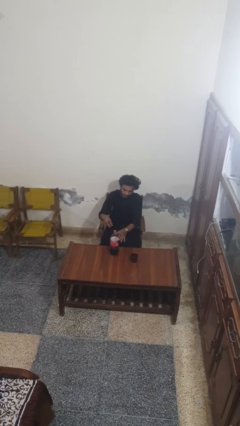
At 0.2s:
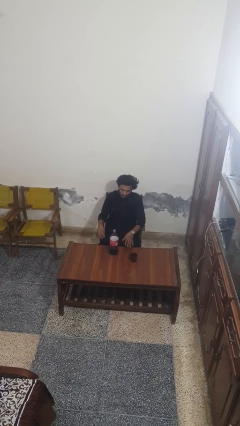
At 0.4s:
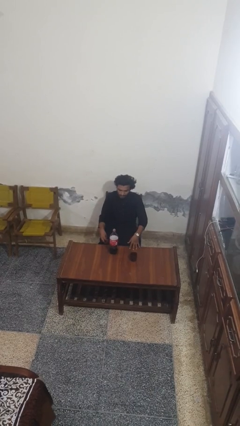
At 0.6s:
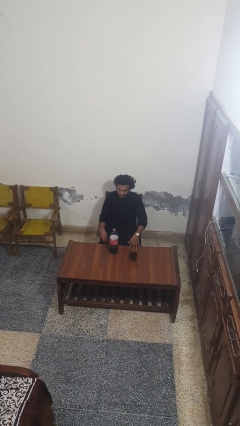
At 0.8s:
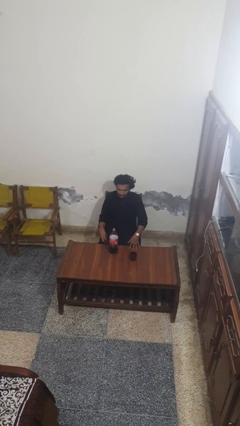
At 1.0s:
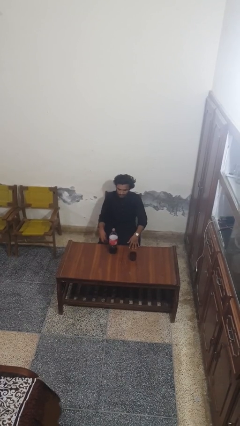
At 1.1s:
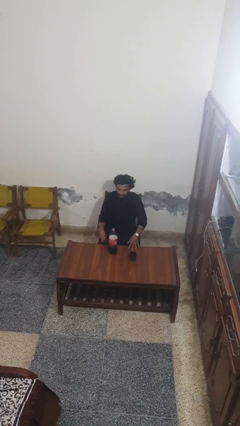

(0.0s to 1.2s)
person unscrews lid from bottle

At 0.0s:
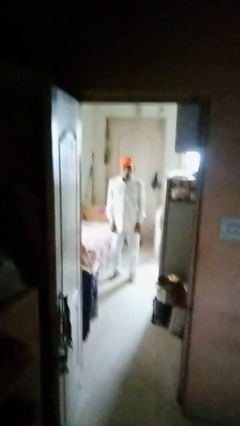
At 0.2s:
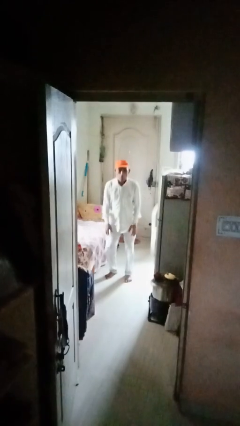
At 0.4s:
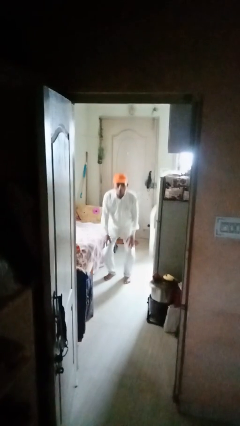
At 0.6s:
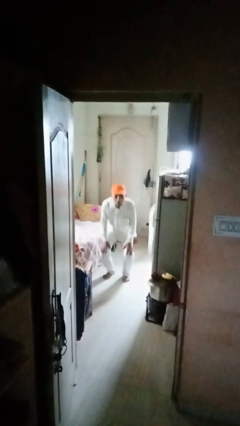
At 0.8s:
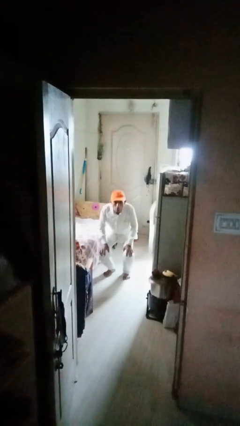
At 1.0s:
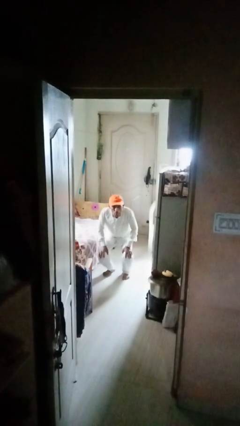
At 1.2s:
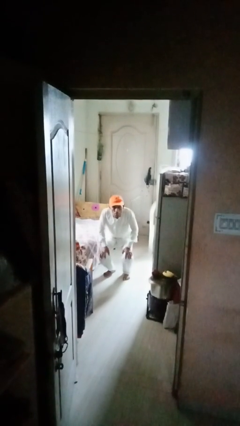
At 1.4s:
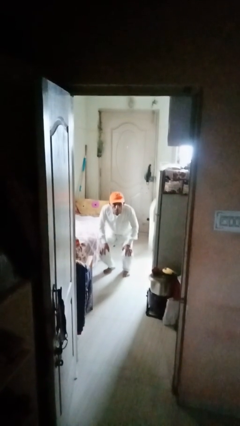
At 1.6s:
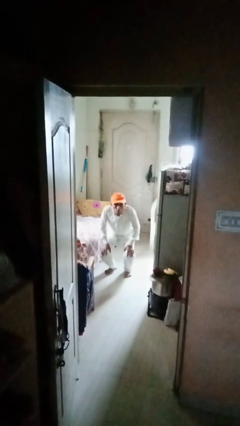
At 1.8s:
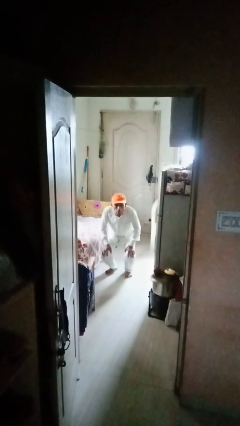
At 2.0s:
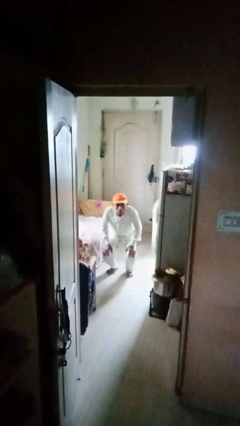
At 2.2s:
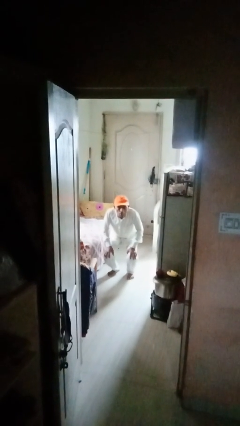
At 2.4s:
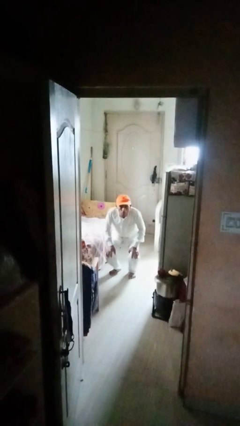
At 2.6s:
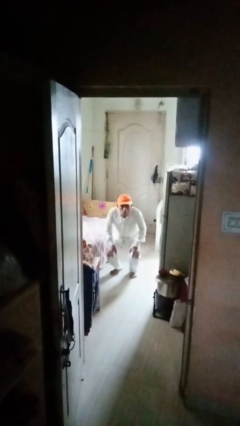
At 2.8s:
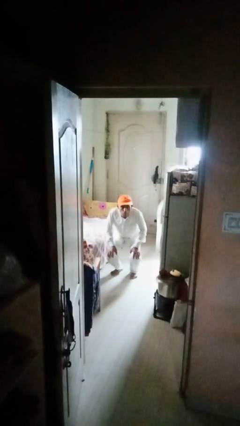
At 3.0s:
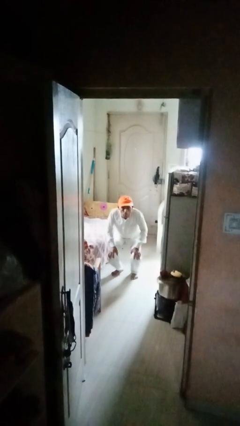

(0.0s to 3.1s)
person squats

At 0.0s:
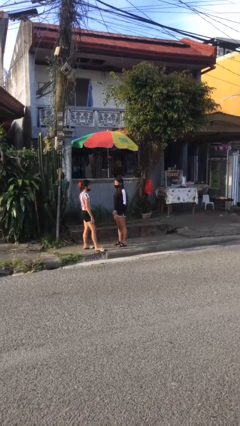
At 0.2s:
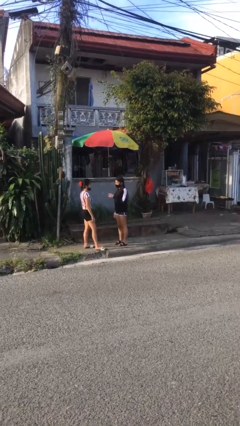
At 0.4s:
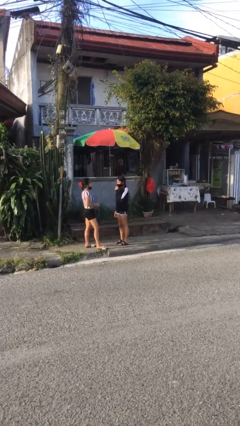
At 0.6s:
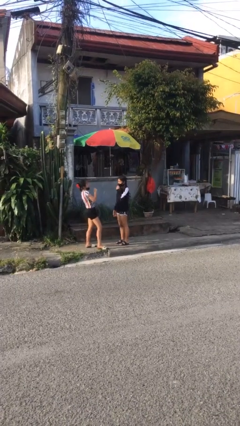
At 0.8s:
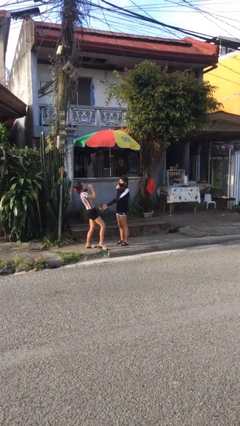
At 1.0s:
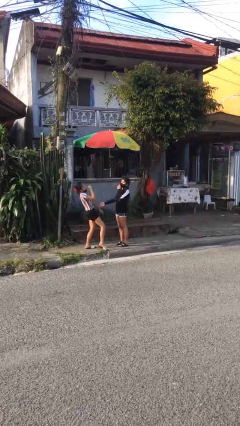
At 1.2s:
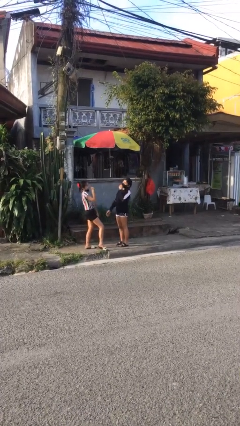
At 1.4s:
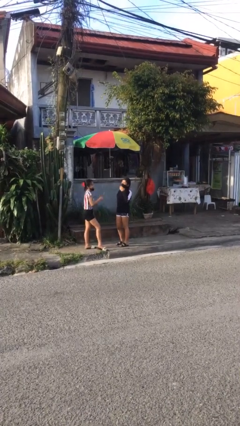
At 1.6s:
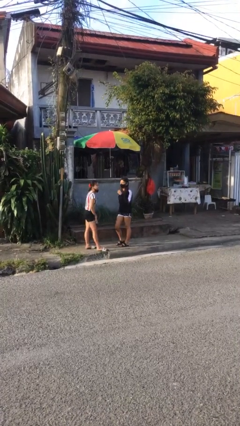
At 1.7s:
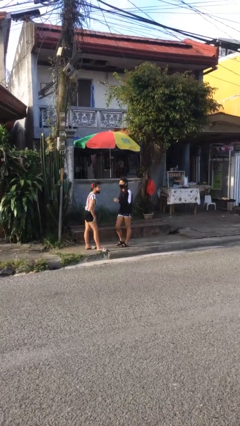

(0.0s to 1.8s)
person laughs with person

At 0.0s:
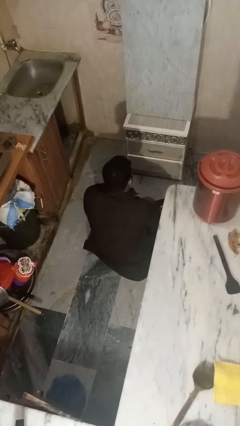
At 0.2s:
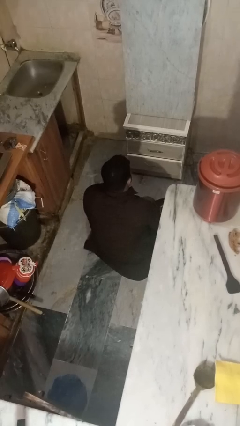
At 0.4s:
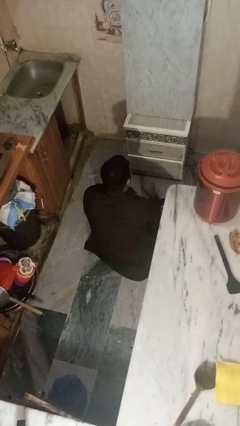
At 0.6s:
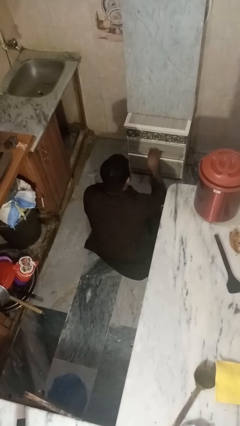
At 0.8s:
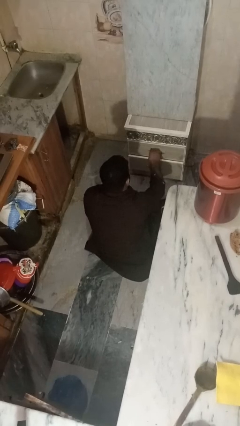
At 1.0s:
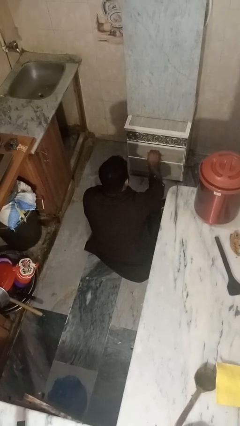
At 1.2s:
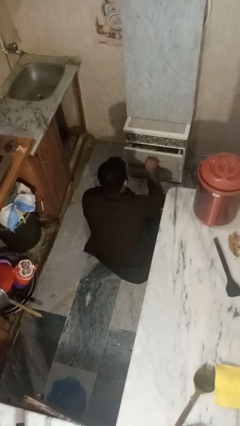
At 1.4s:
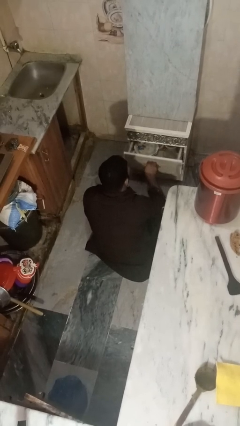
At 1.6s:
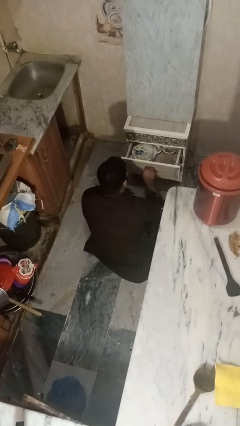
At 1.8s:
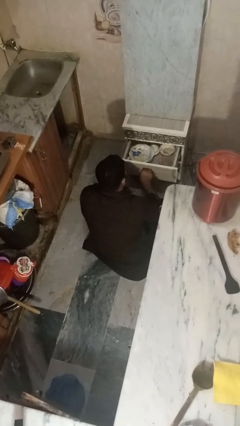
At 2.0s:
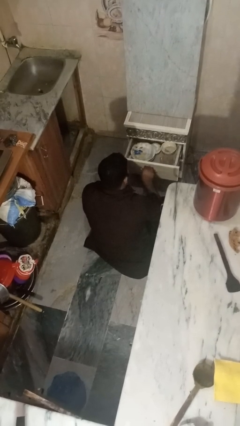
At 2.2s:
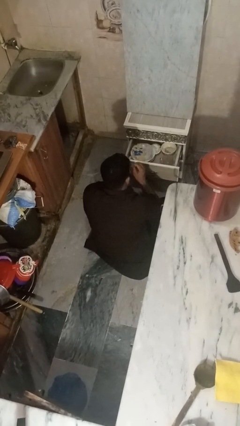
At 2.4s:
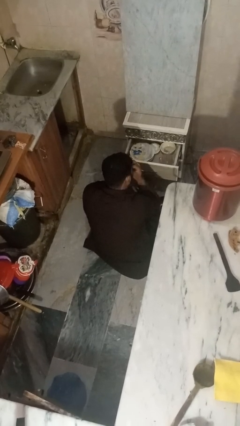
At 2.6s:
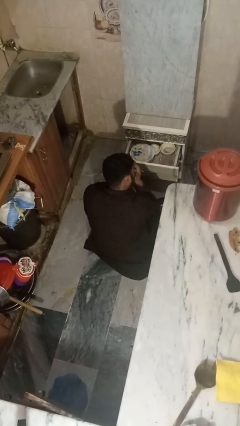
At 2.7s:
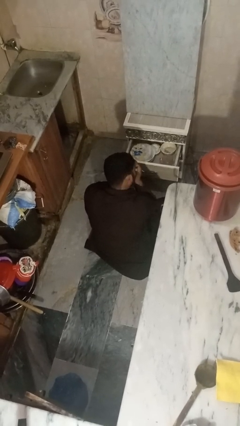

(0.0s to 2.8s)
person opens kitchen drawer

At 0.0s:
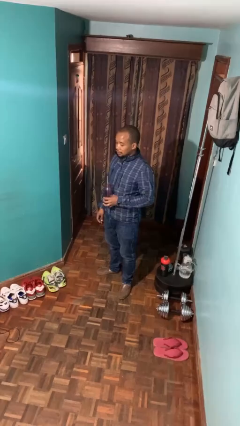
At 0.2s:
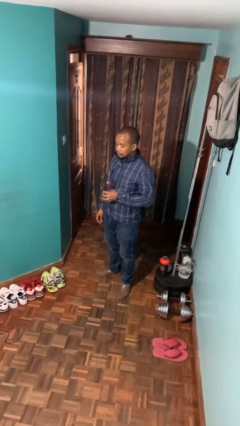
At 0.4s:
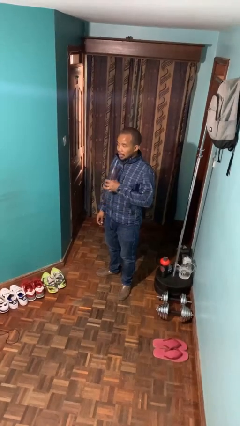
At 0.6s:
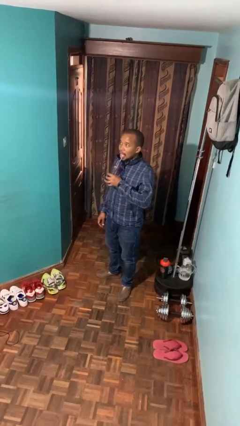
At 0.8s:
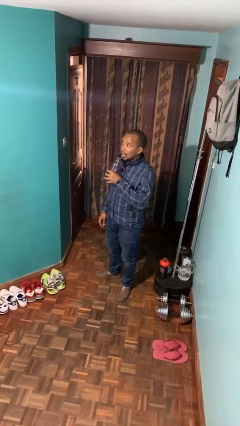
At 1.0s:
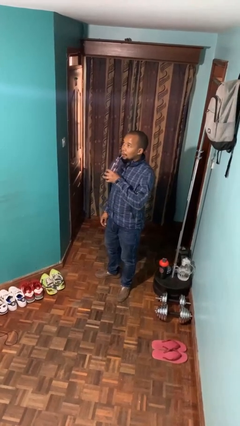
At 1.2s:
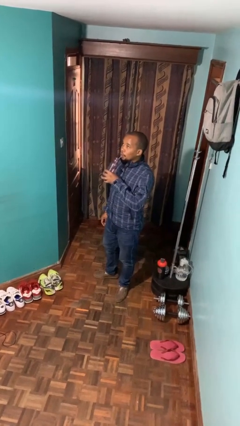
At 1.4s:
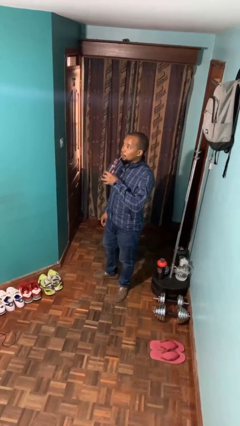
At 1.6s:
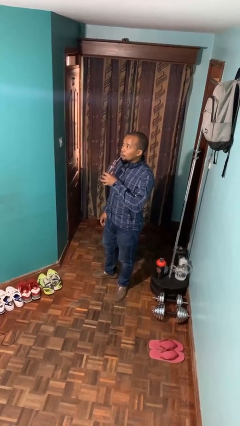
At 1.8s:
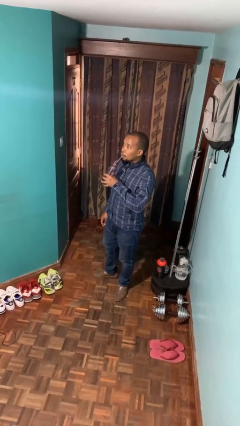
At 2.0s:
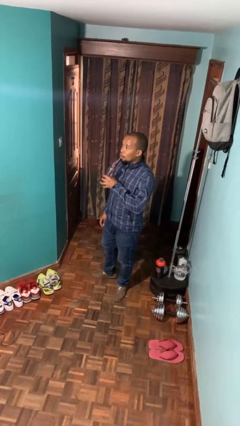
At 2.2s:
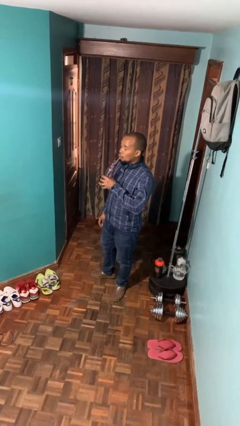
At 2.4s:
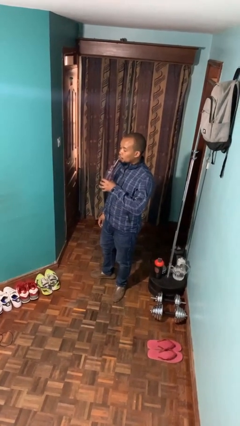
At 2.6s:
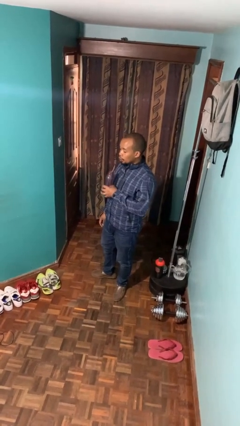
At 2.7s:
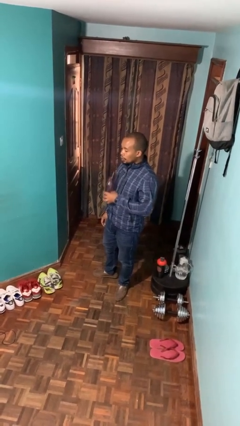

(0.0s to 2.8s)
person drinks from straw

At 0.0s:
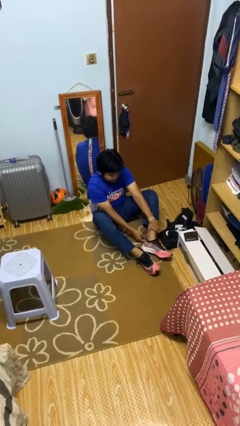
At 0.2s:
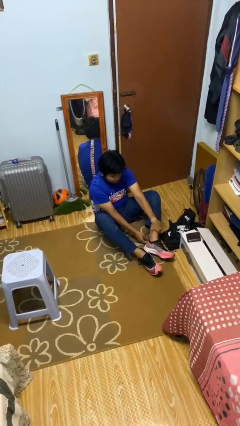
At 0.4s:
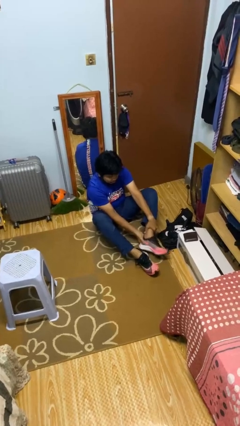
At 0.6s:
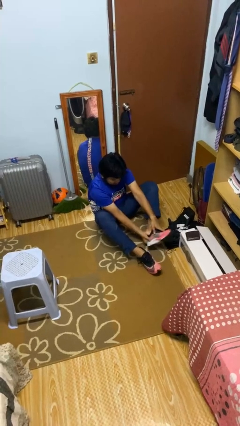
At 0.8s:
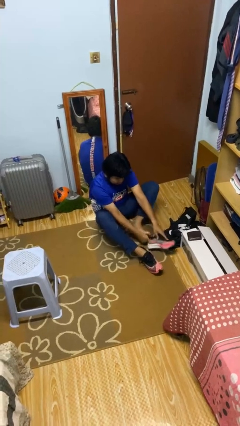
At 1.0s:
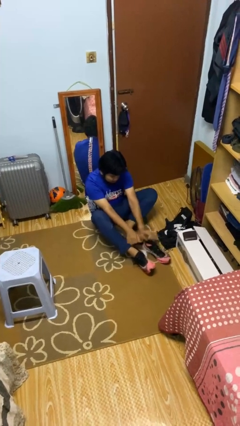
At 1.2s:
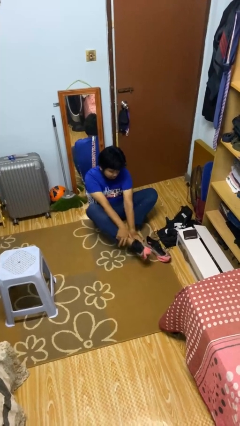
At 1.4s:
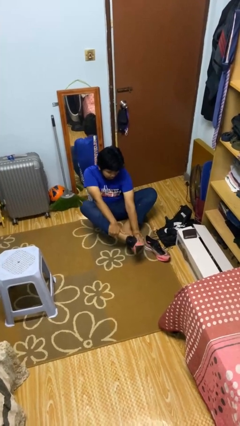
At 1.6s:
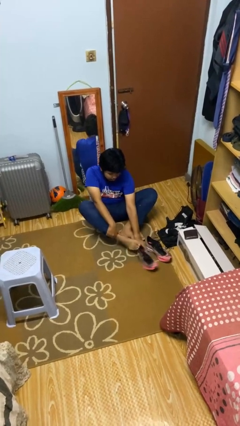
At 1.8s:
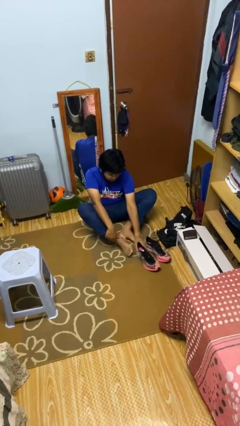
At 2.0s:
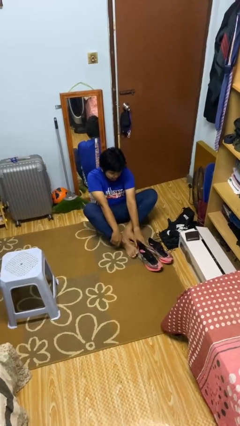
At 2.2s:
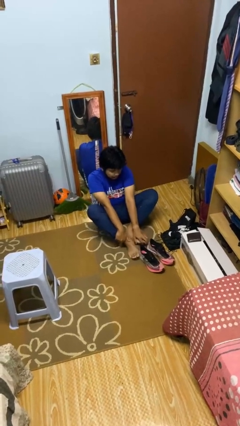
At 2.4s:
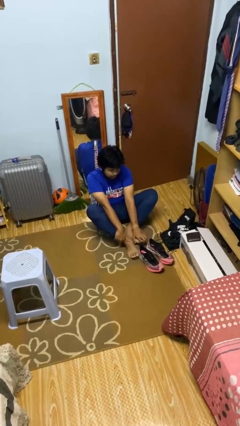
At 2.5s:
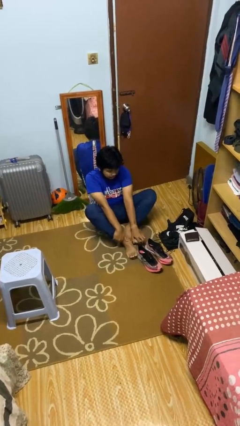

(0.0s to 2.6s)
person takes off shoes

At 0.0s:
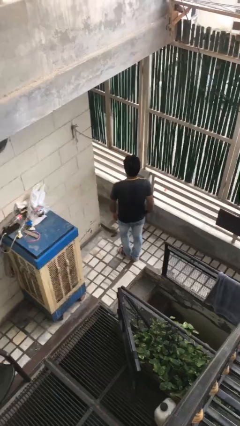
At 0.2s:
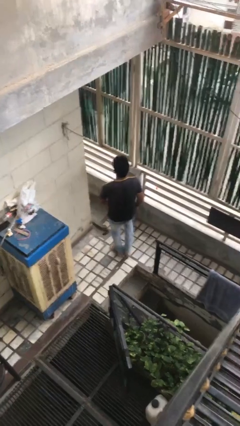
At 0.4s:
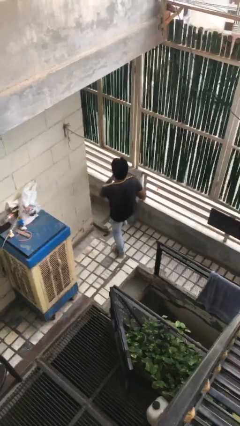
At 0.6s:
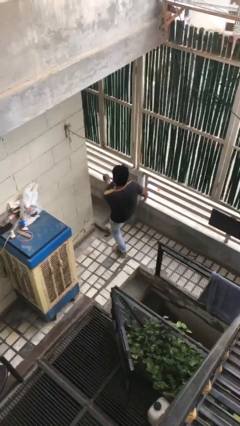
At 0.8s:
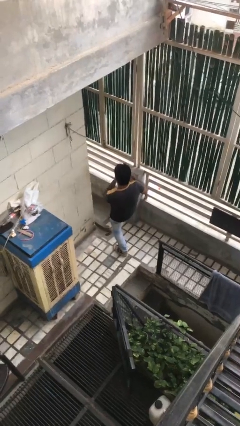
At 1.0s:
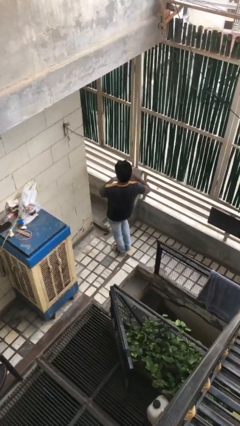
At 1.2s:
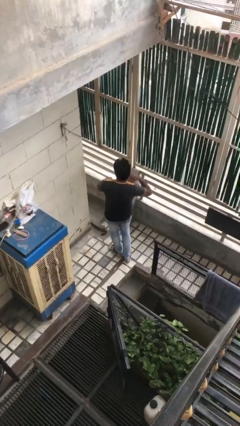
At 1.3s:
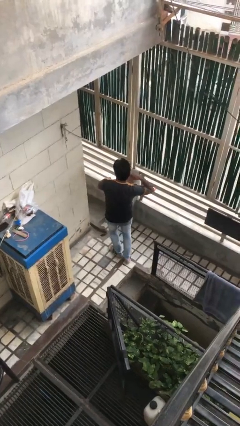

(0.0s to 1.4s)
person karate kicks

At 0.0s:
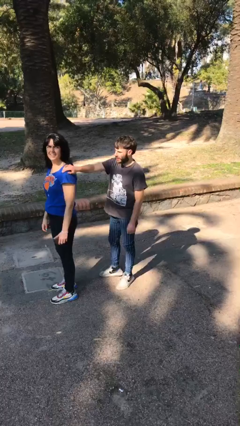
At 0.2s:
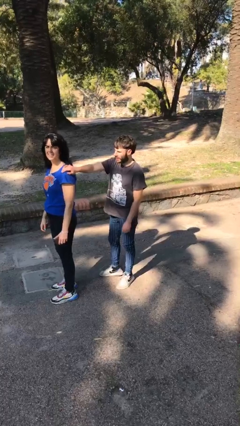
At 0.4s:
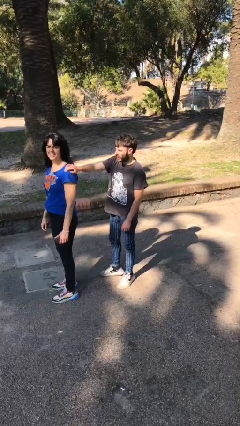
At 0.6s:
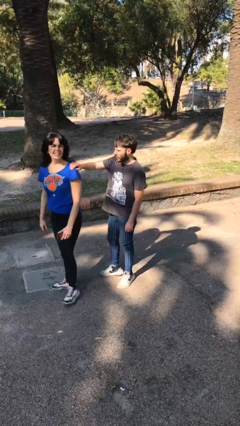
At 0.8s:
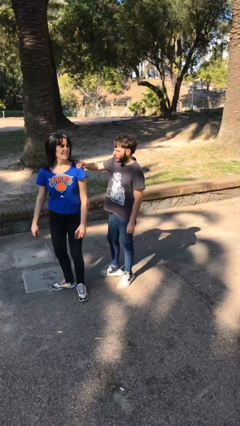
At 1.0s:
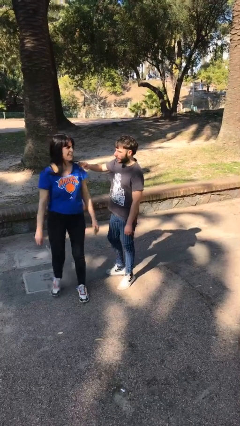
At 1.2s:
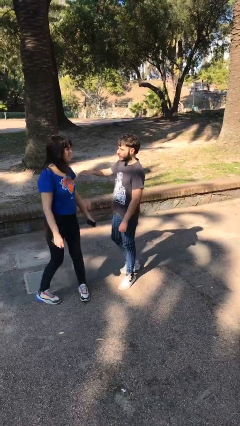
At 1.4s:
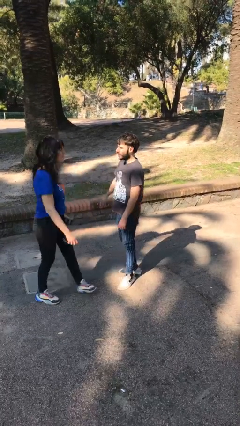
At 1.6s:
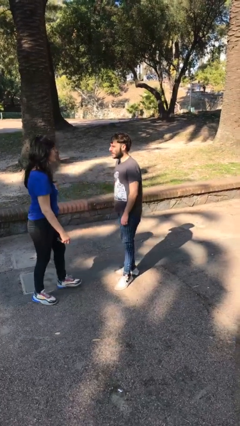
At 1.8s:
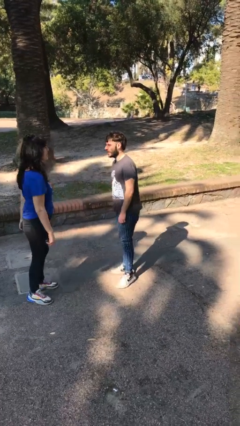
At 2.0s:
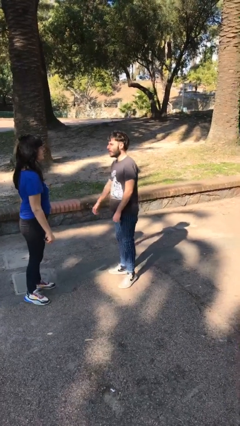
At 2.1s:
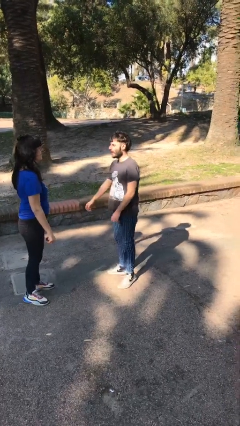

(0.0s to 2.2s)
person spins person around
